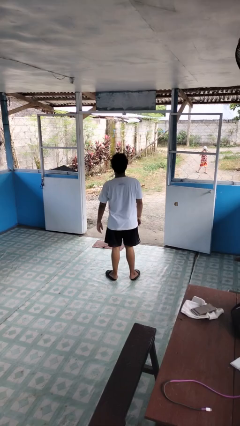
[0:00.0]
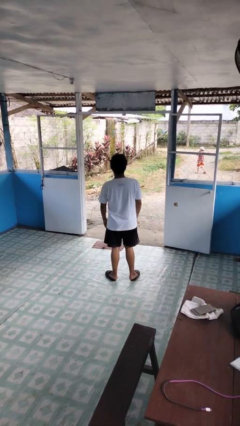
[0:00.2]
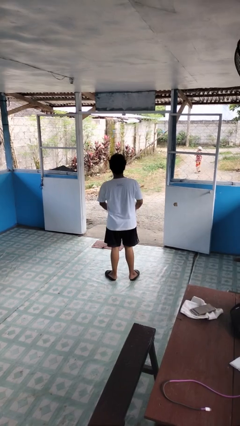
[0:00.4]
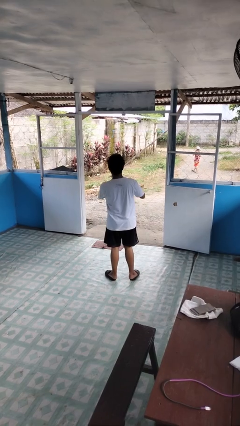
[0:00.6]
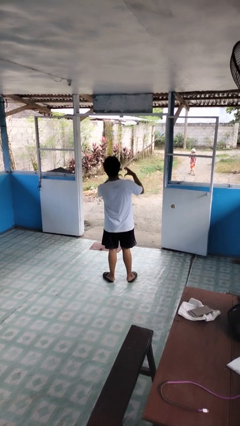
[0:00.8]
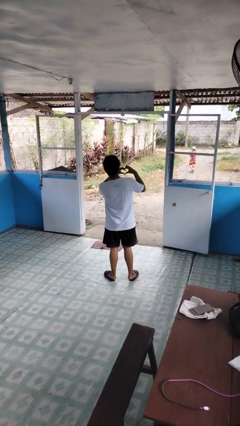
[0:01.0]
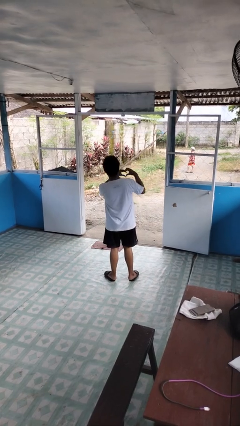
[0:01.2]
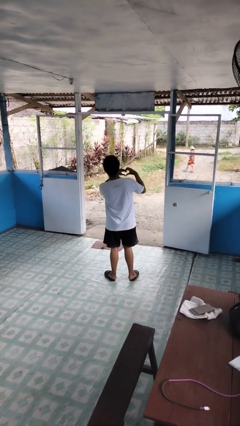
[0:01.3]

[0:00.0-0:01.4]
person gestures heart

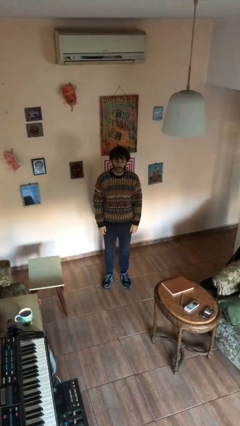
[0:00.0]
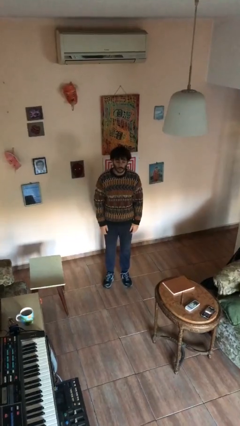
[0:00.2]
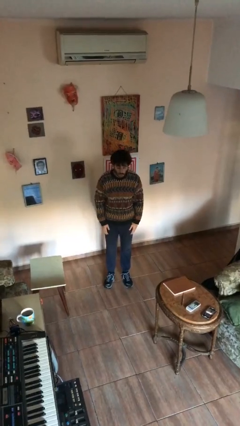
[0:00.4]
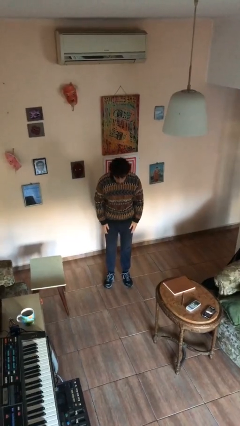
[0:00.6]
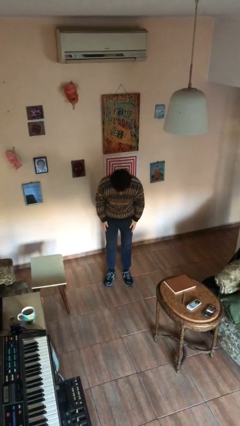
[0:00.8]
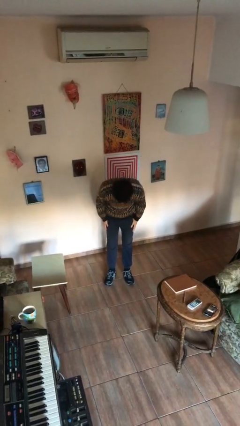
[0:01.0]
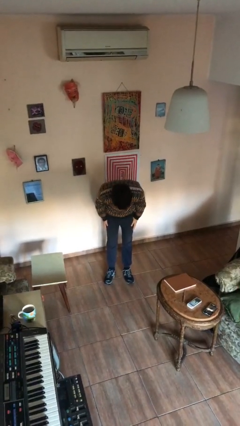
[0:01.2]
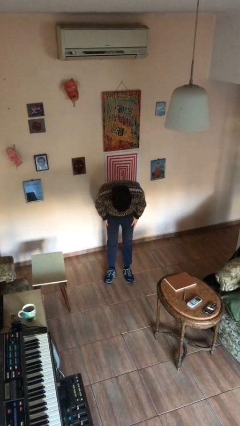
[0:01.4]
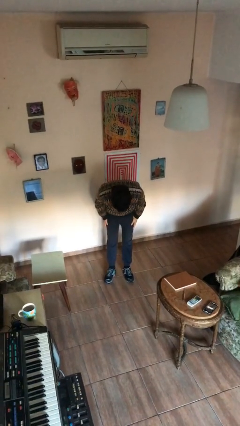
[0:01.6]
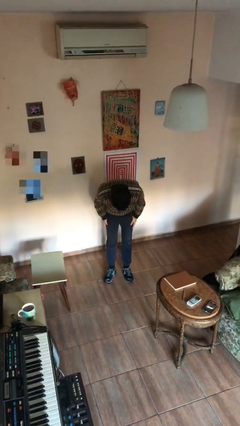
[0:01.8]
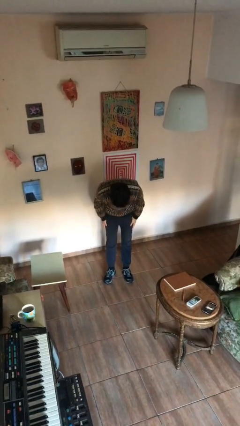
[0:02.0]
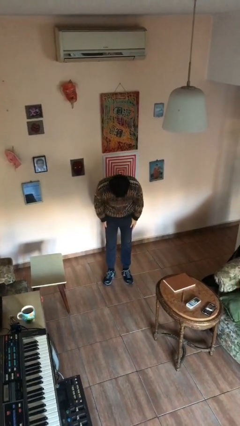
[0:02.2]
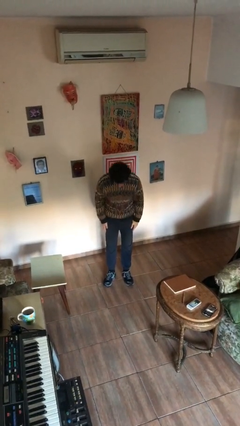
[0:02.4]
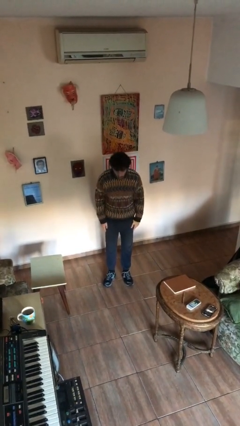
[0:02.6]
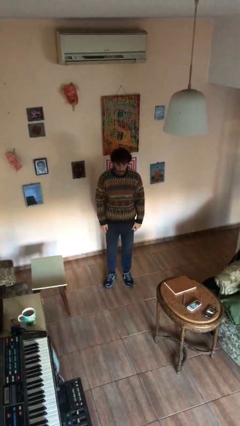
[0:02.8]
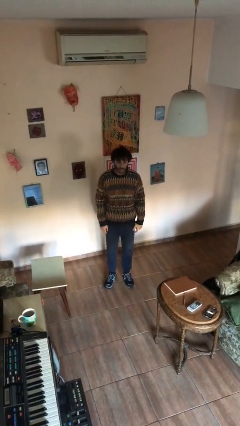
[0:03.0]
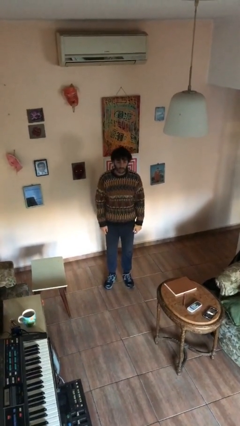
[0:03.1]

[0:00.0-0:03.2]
person bows

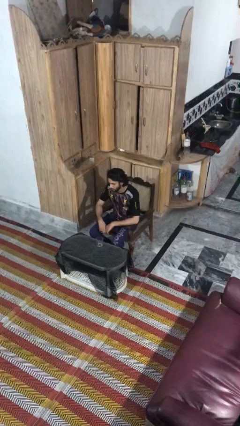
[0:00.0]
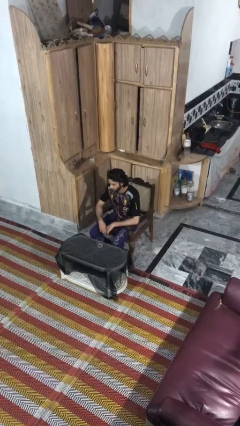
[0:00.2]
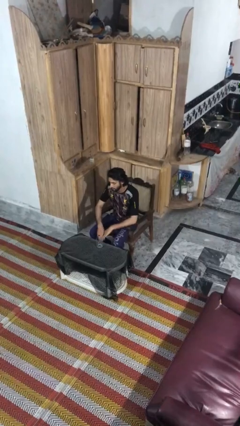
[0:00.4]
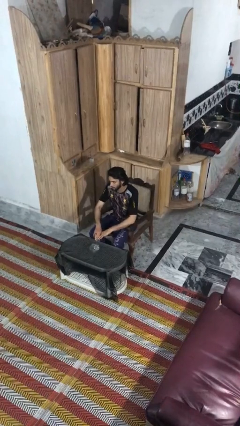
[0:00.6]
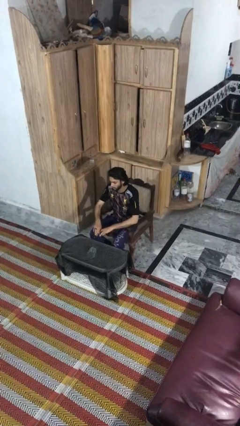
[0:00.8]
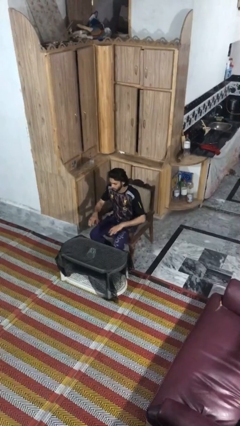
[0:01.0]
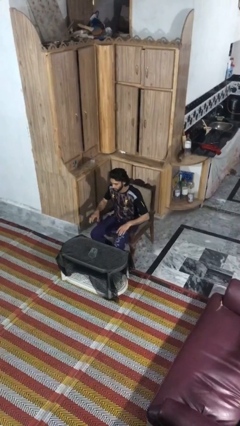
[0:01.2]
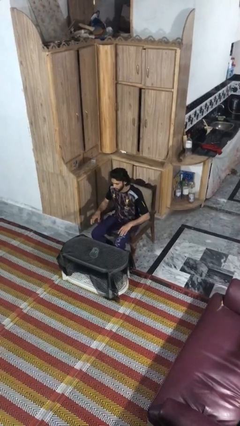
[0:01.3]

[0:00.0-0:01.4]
person knocks over glass

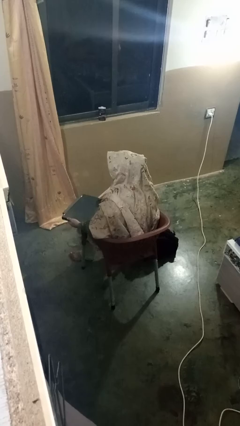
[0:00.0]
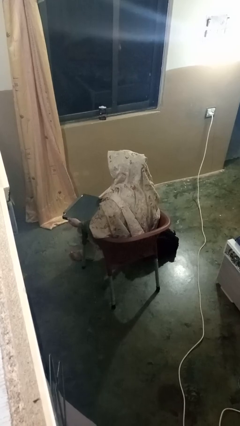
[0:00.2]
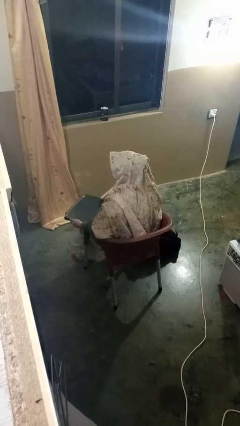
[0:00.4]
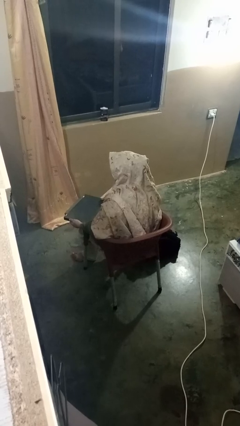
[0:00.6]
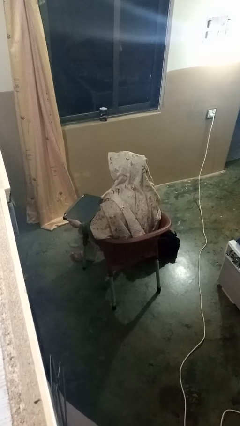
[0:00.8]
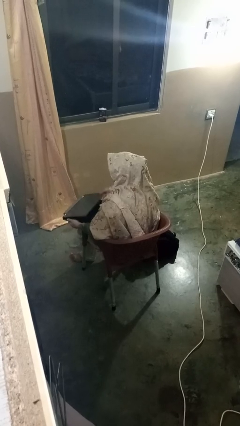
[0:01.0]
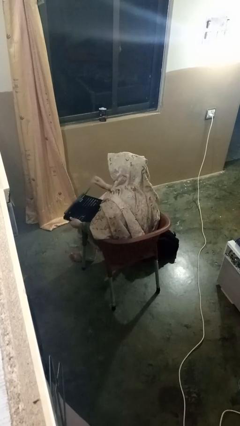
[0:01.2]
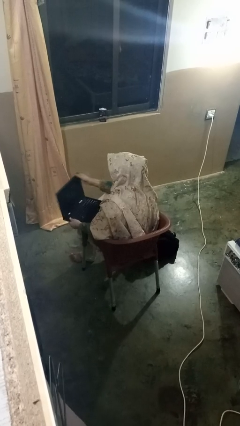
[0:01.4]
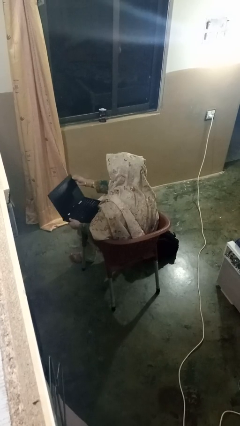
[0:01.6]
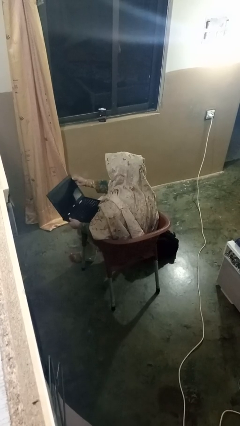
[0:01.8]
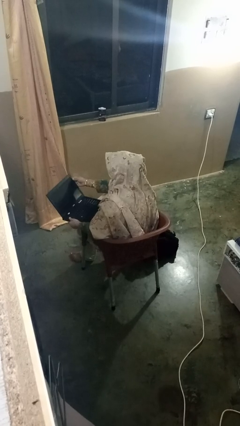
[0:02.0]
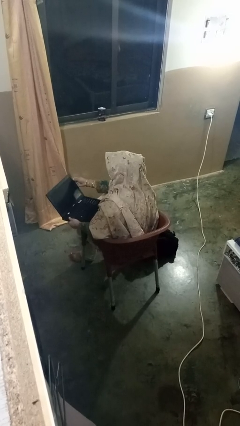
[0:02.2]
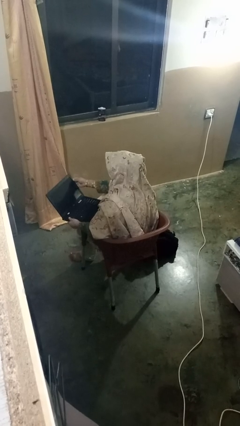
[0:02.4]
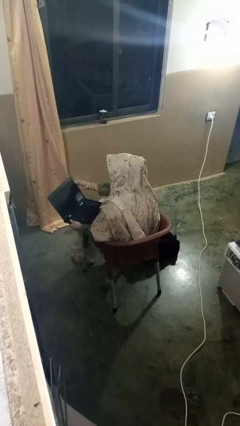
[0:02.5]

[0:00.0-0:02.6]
person opens laptop

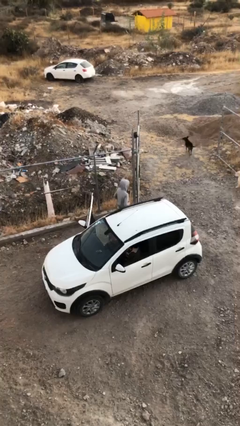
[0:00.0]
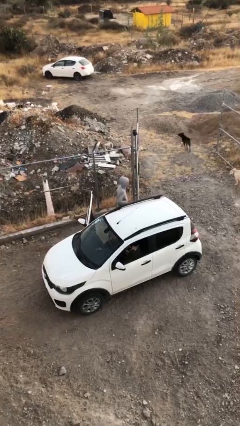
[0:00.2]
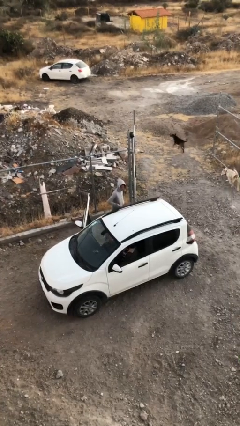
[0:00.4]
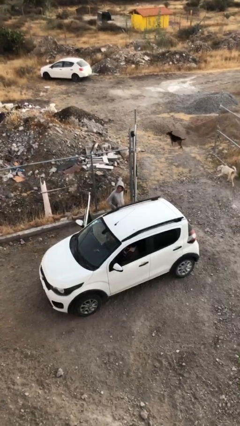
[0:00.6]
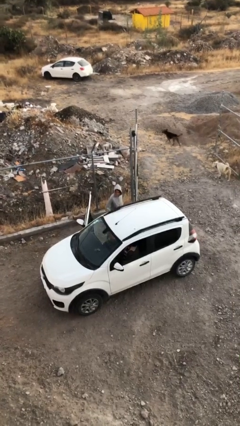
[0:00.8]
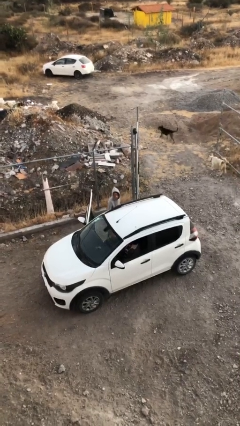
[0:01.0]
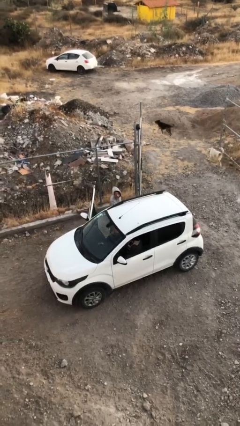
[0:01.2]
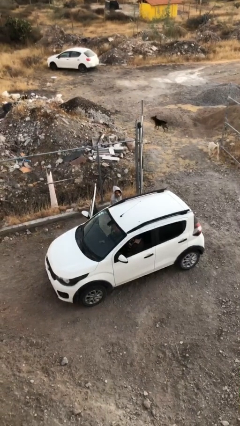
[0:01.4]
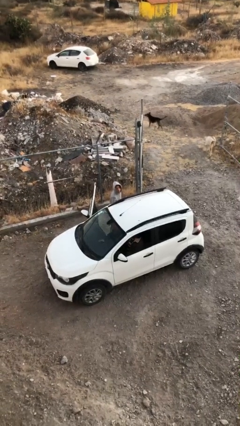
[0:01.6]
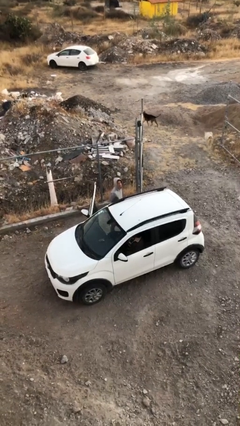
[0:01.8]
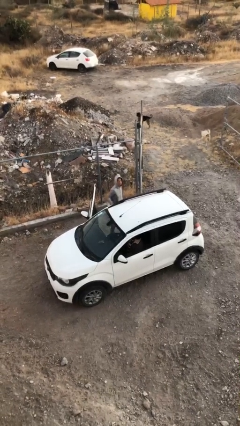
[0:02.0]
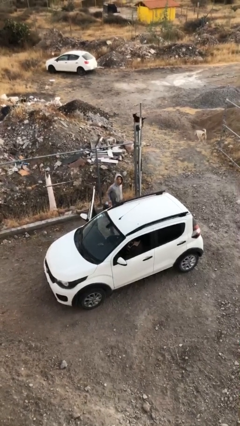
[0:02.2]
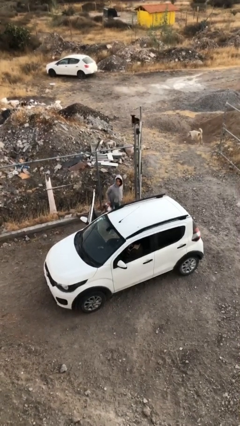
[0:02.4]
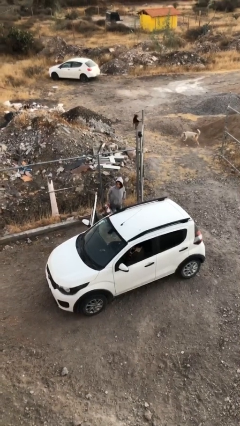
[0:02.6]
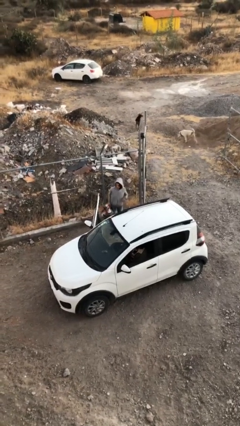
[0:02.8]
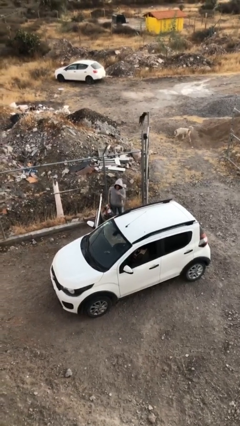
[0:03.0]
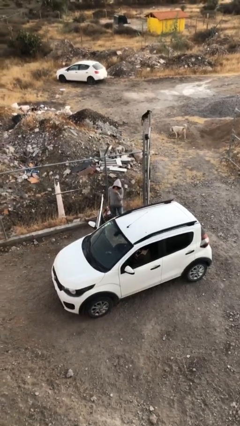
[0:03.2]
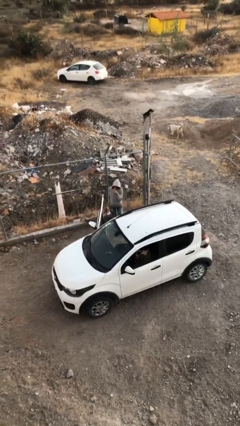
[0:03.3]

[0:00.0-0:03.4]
person unloads car

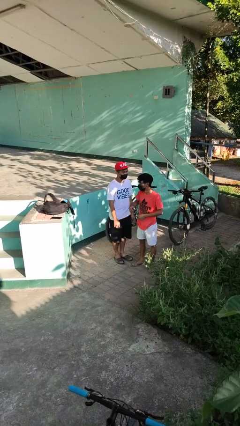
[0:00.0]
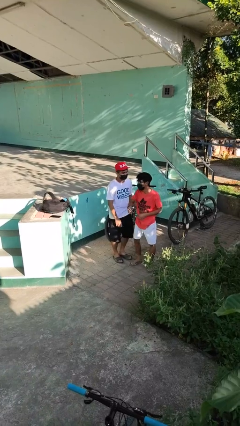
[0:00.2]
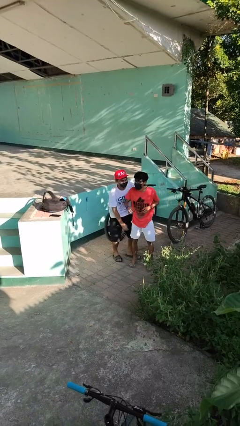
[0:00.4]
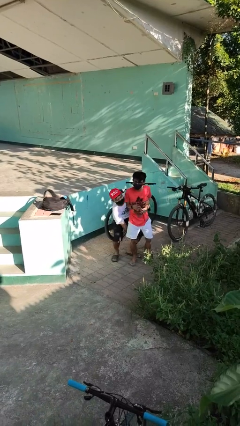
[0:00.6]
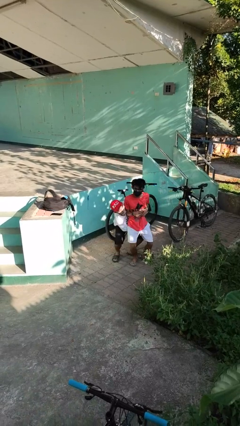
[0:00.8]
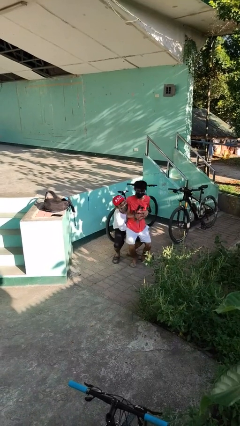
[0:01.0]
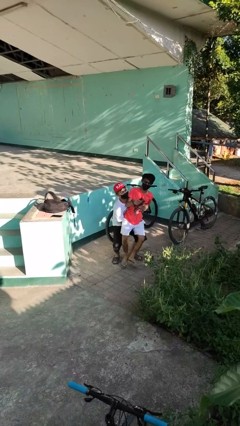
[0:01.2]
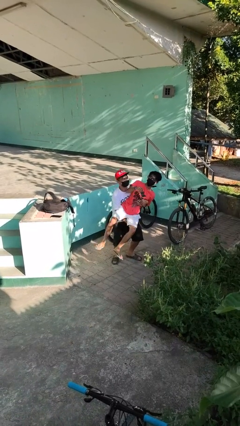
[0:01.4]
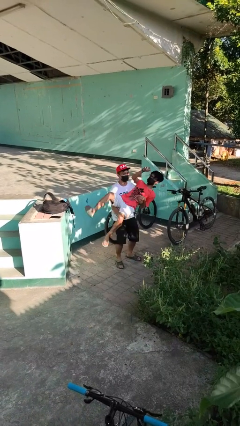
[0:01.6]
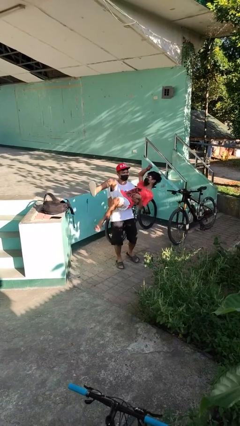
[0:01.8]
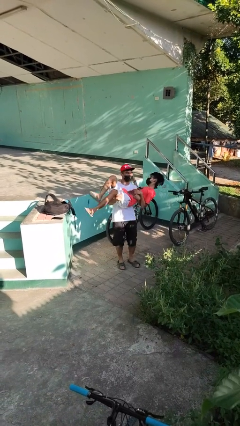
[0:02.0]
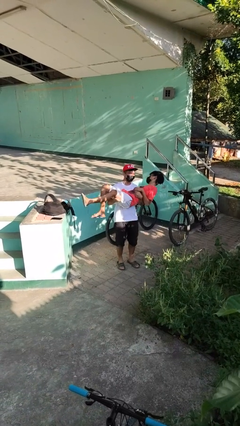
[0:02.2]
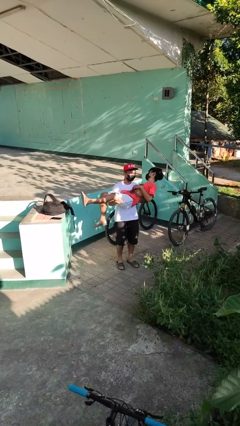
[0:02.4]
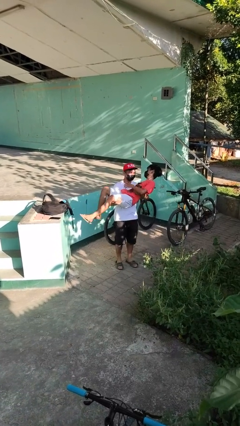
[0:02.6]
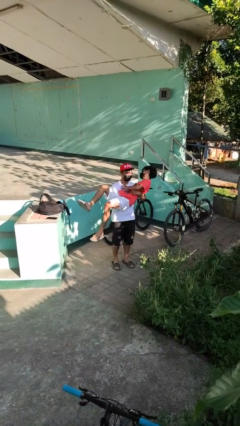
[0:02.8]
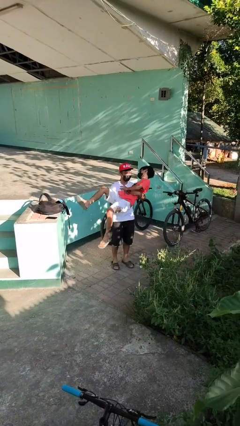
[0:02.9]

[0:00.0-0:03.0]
person picks up person

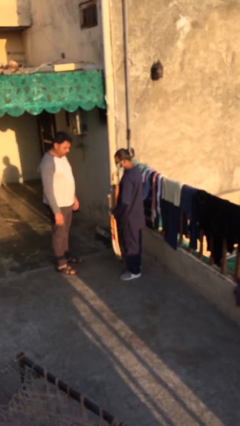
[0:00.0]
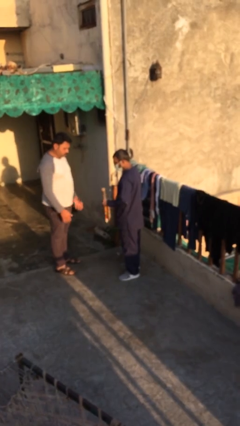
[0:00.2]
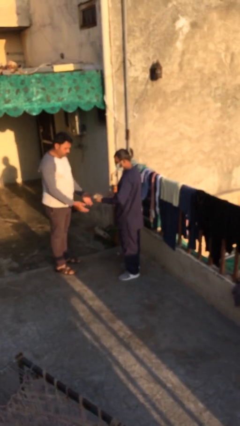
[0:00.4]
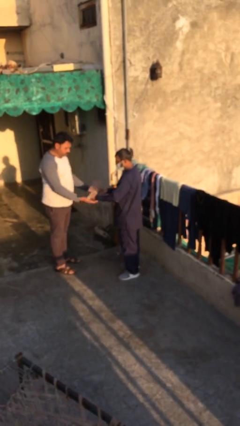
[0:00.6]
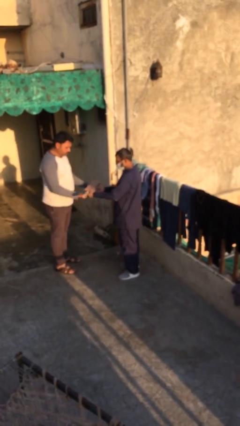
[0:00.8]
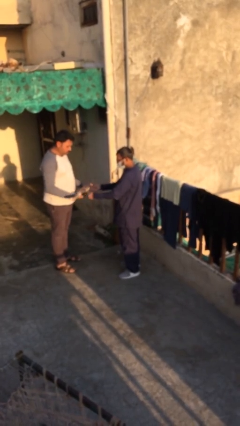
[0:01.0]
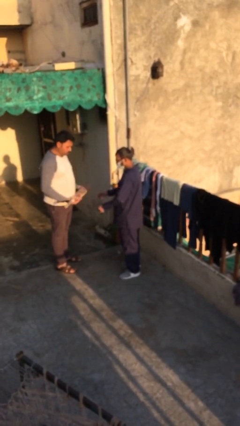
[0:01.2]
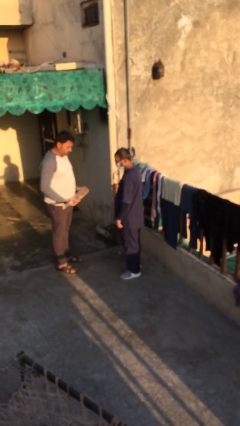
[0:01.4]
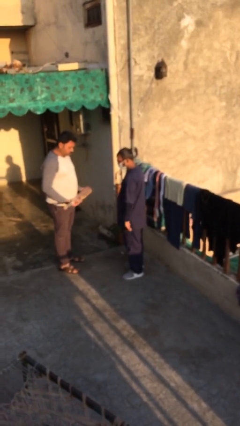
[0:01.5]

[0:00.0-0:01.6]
person transfers object to person

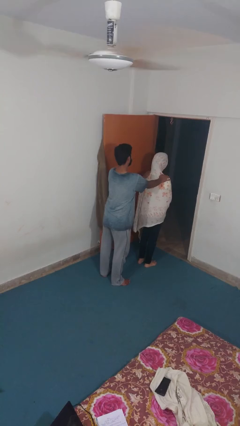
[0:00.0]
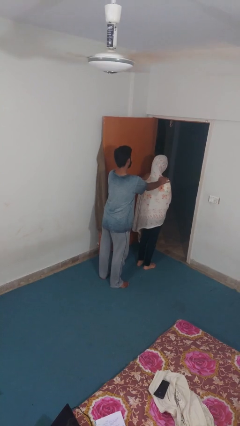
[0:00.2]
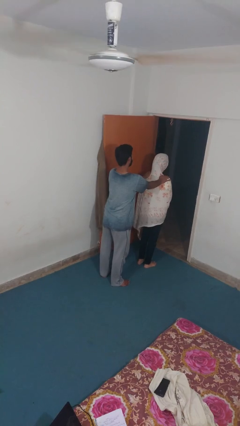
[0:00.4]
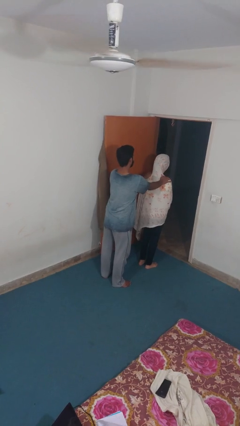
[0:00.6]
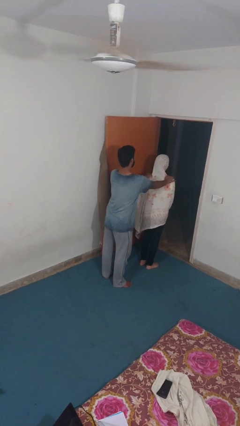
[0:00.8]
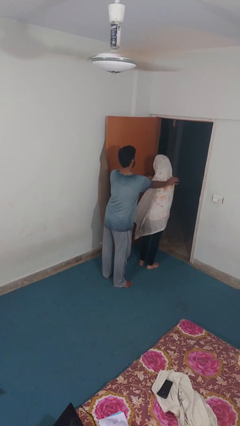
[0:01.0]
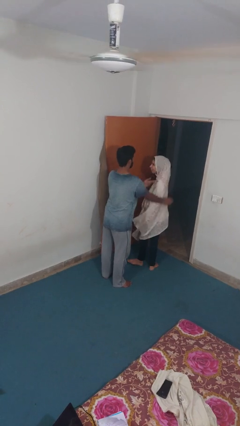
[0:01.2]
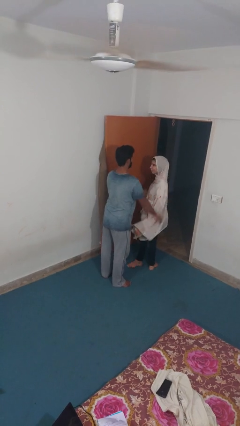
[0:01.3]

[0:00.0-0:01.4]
person spins person around
